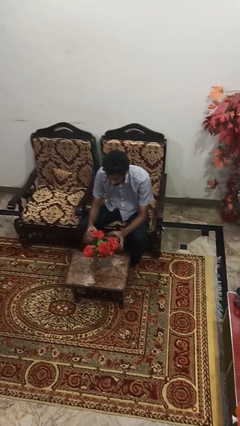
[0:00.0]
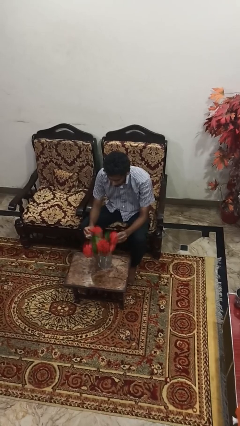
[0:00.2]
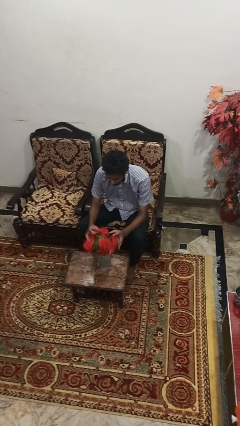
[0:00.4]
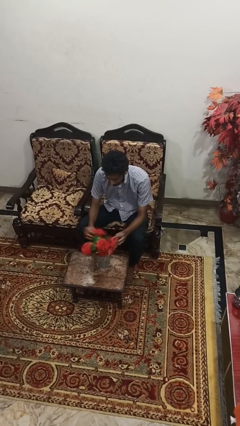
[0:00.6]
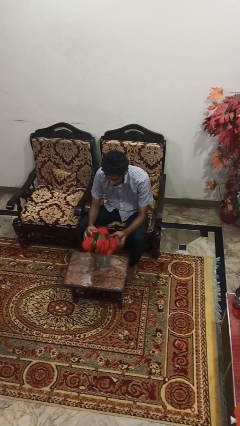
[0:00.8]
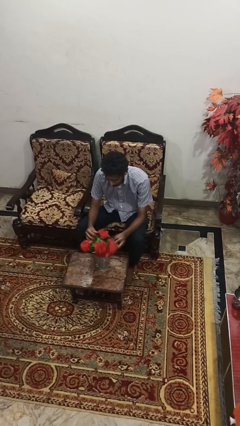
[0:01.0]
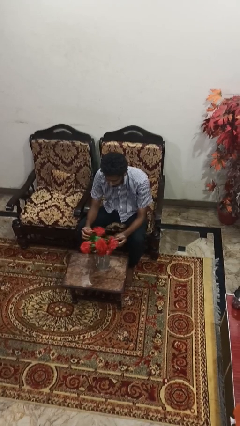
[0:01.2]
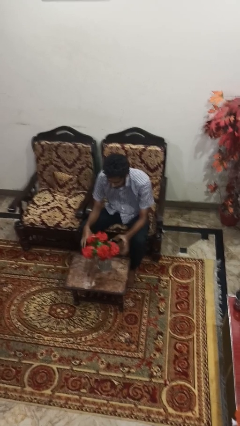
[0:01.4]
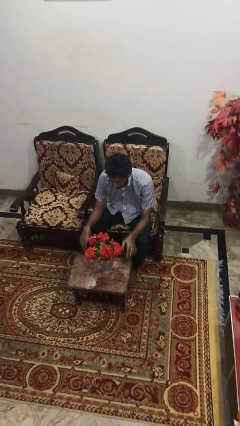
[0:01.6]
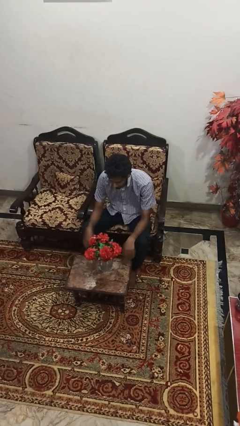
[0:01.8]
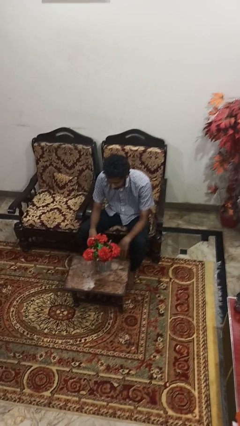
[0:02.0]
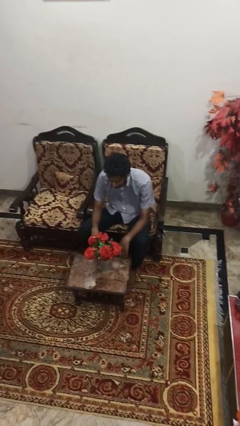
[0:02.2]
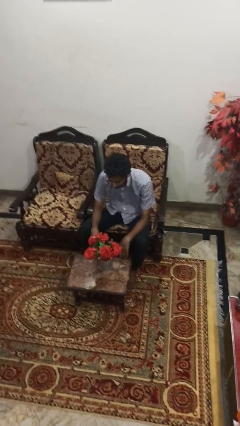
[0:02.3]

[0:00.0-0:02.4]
person arranges flowers in vase

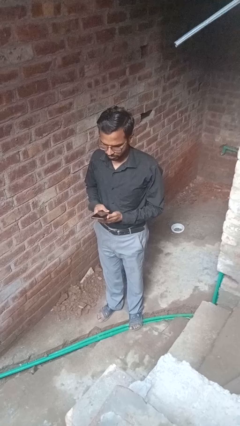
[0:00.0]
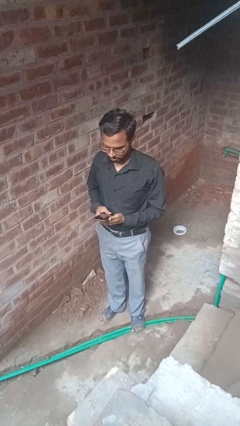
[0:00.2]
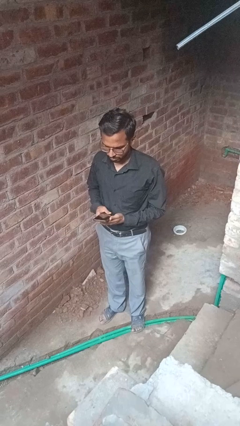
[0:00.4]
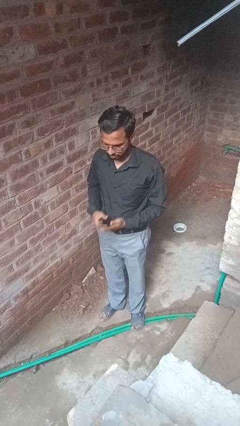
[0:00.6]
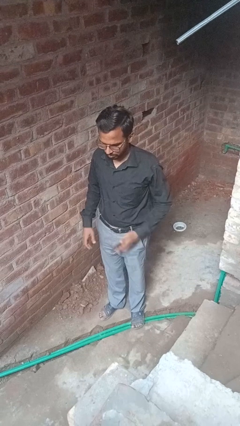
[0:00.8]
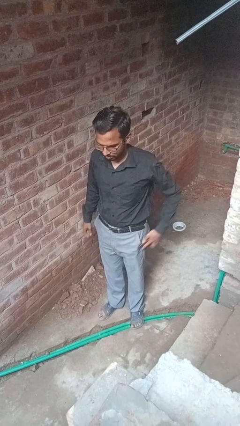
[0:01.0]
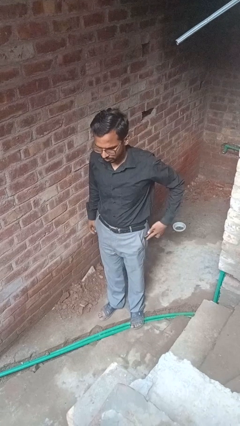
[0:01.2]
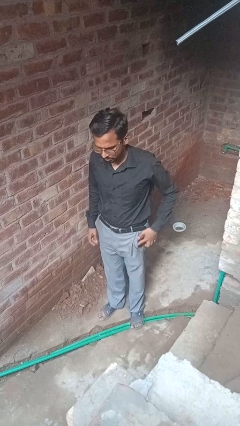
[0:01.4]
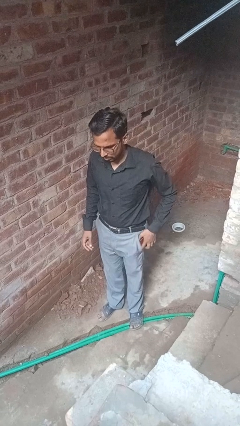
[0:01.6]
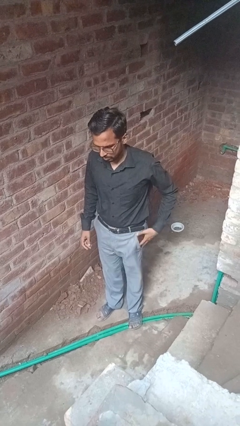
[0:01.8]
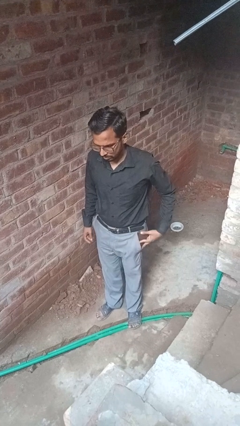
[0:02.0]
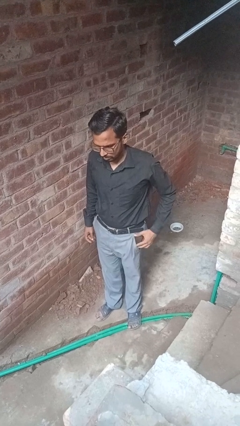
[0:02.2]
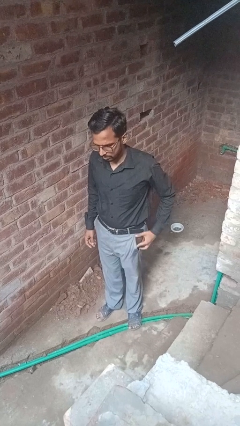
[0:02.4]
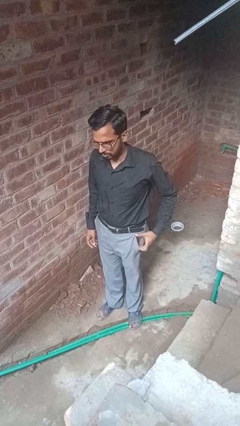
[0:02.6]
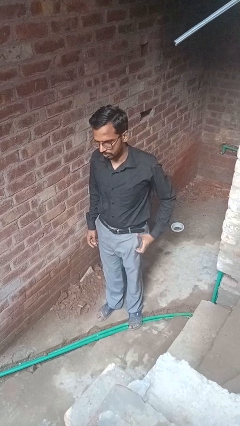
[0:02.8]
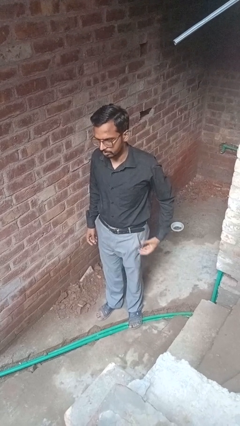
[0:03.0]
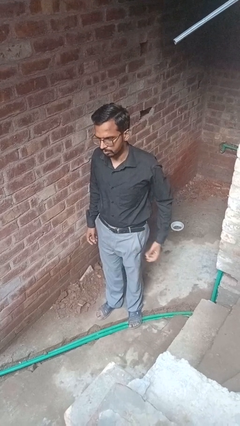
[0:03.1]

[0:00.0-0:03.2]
person puts phone into pocket

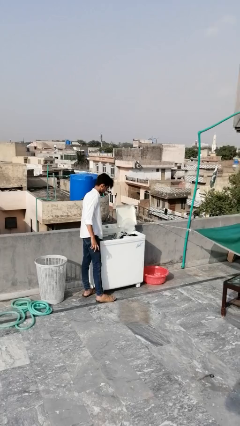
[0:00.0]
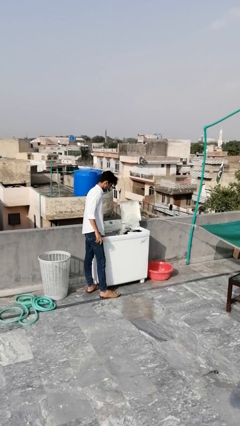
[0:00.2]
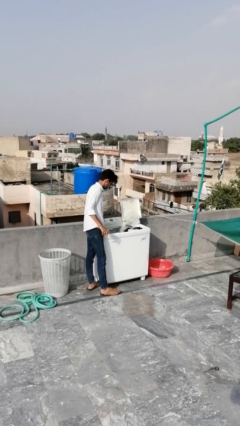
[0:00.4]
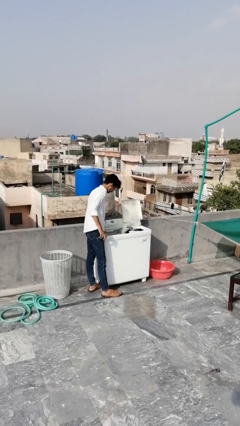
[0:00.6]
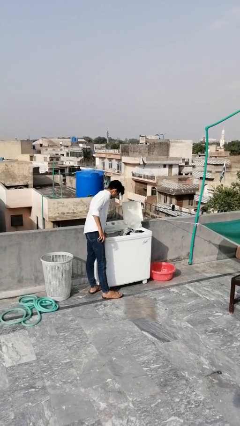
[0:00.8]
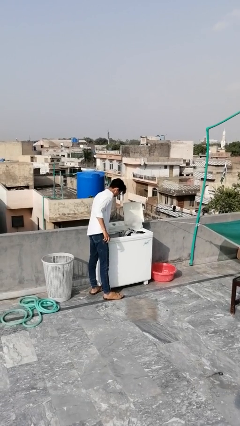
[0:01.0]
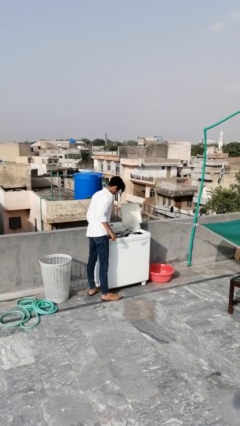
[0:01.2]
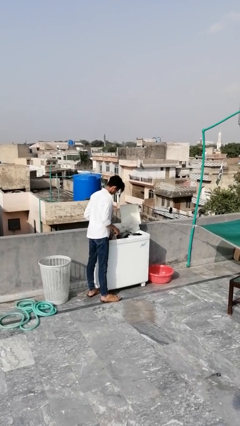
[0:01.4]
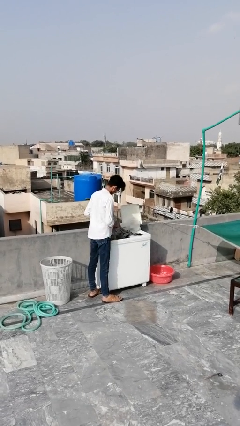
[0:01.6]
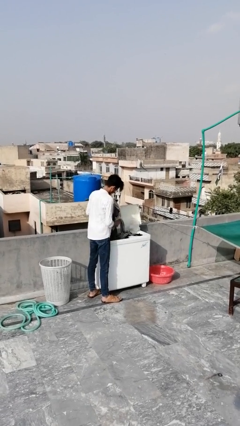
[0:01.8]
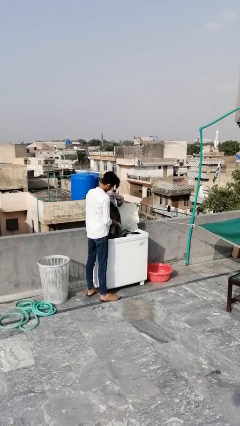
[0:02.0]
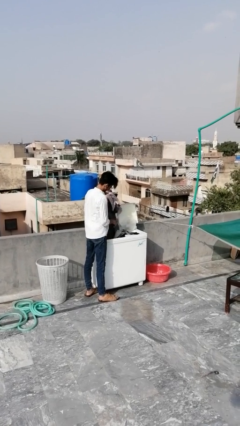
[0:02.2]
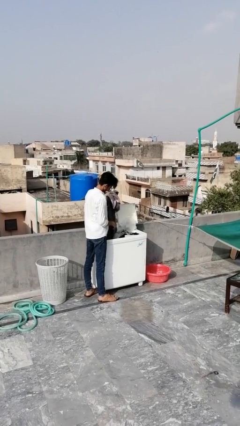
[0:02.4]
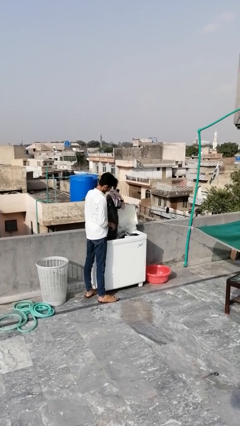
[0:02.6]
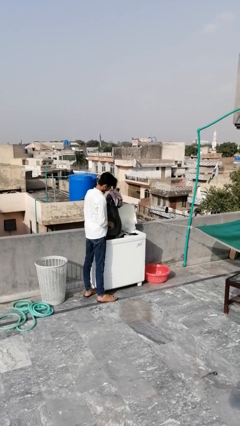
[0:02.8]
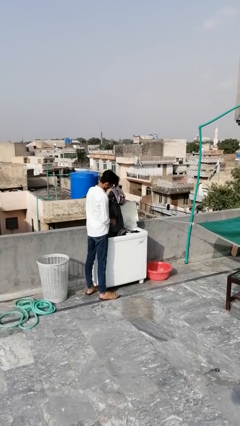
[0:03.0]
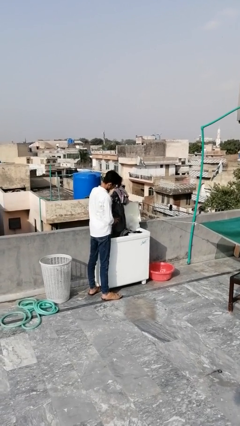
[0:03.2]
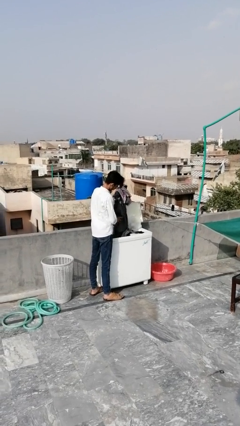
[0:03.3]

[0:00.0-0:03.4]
person unloads clotheswasher

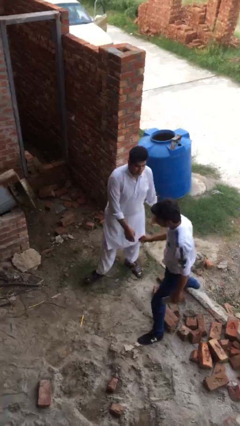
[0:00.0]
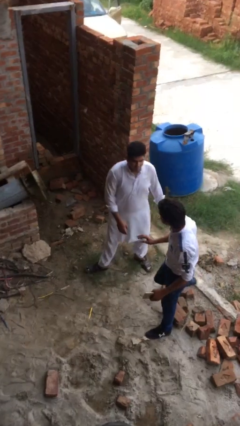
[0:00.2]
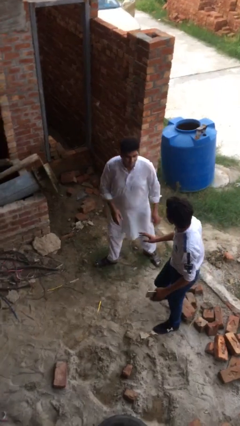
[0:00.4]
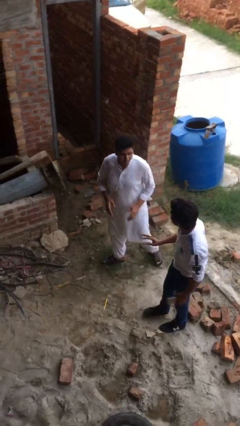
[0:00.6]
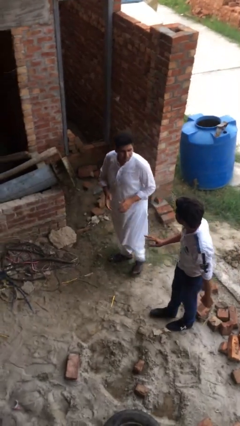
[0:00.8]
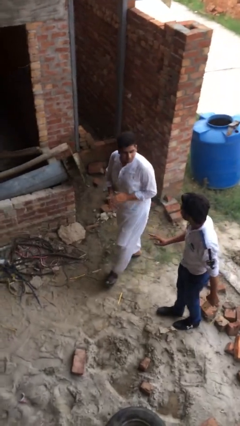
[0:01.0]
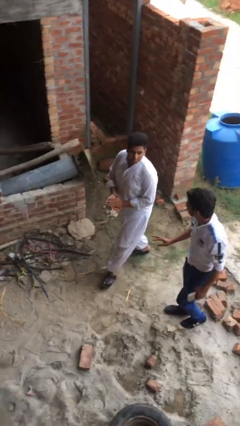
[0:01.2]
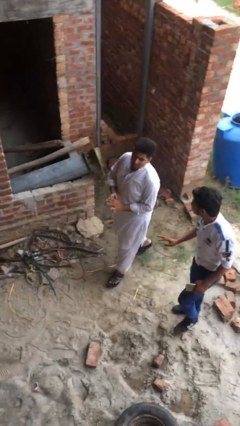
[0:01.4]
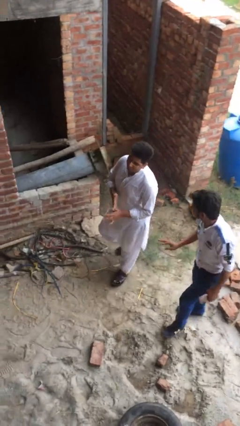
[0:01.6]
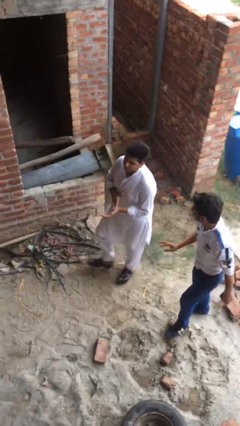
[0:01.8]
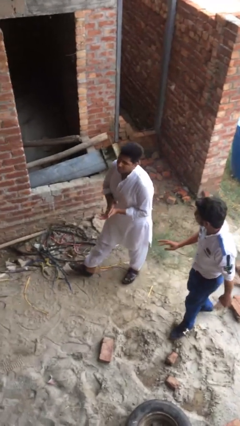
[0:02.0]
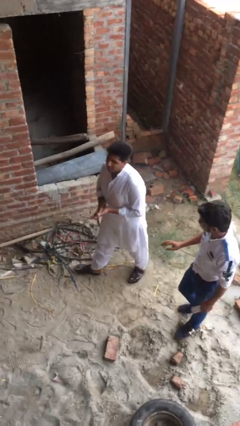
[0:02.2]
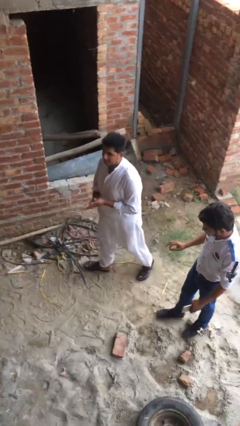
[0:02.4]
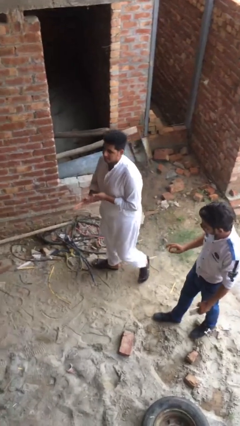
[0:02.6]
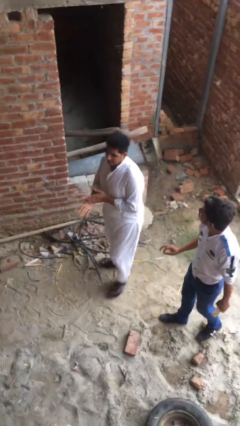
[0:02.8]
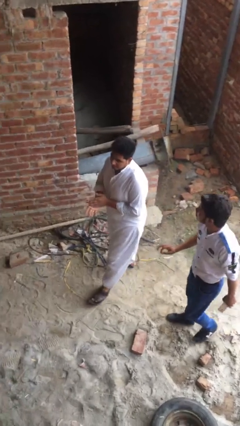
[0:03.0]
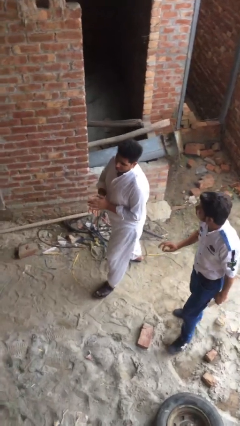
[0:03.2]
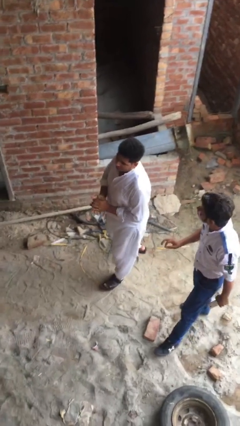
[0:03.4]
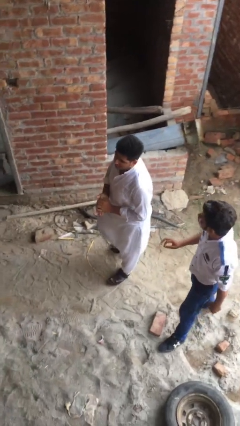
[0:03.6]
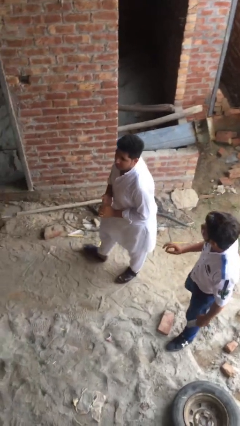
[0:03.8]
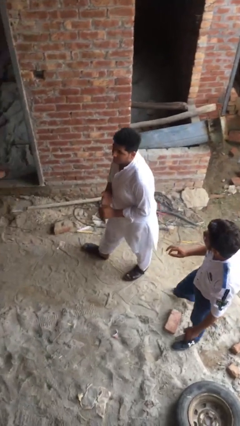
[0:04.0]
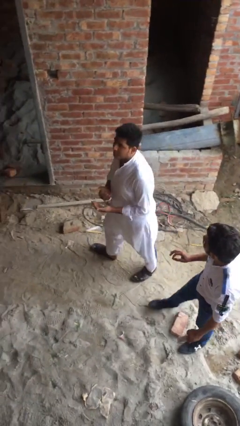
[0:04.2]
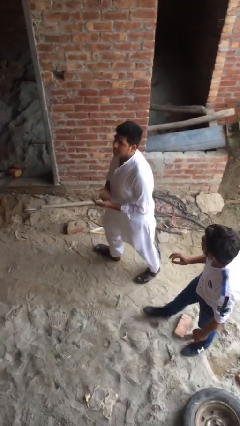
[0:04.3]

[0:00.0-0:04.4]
person talks to person

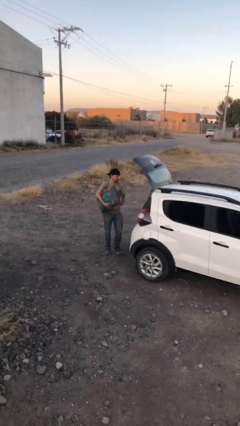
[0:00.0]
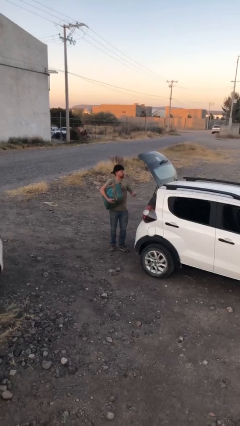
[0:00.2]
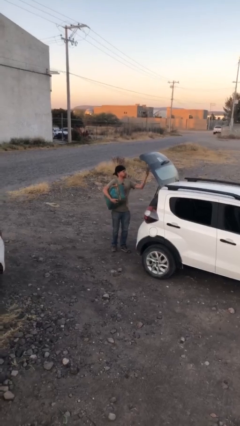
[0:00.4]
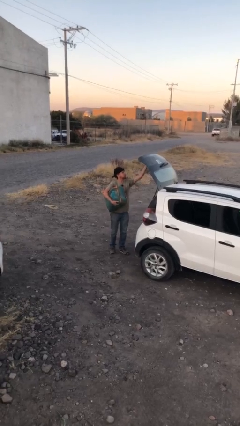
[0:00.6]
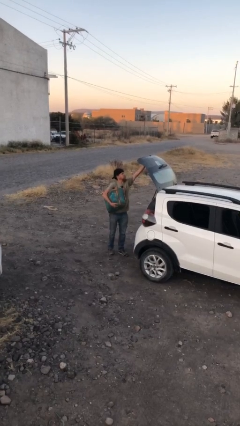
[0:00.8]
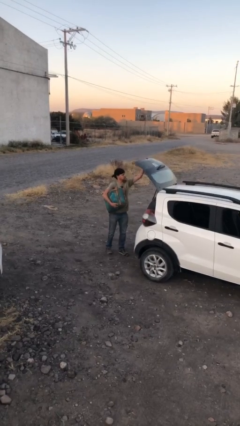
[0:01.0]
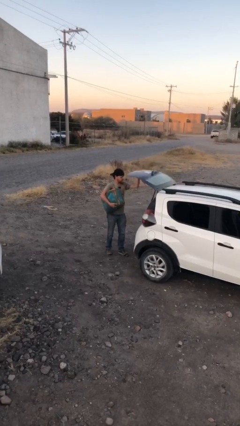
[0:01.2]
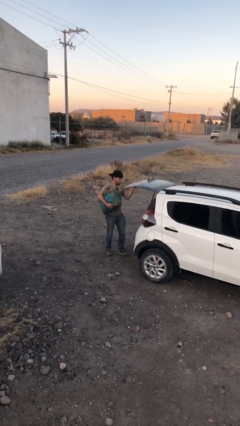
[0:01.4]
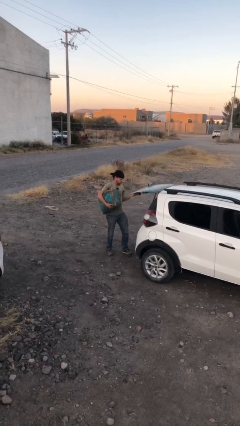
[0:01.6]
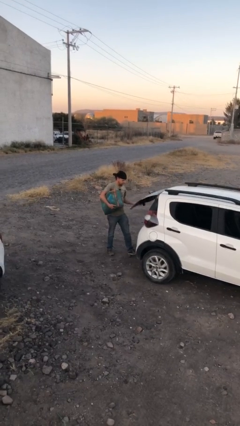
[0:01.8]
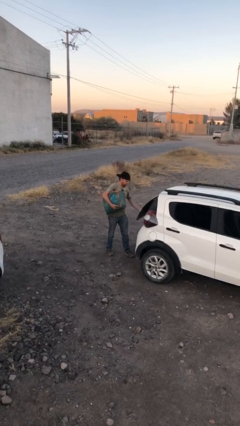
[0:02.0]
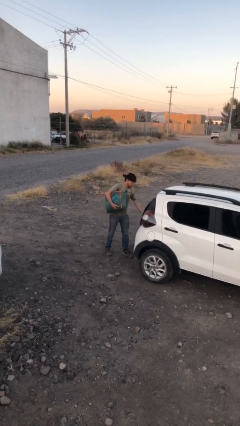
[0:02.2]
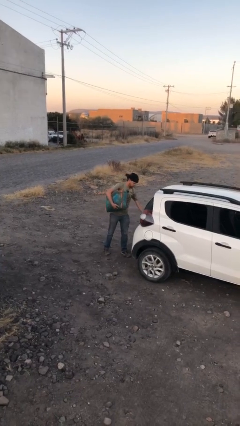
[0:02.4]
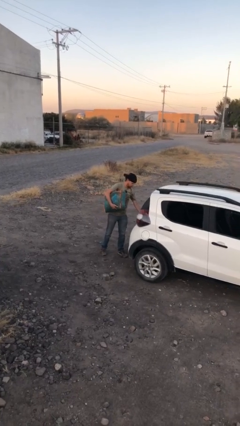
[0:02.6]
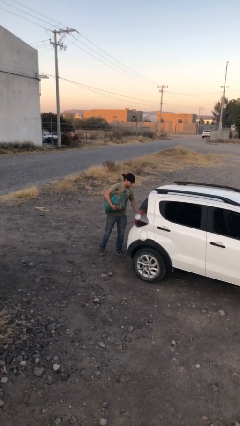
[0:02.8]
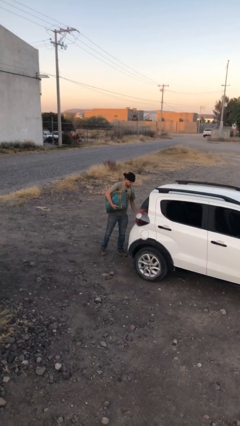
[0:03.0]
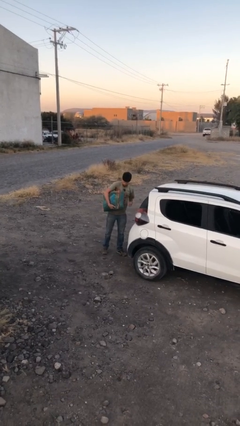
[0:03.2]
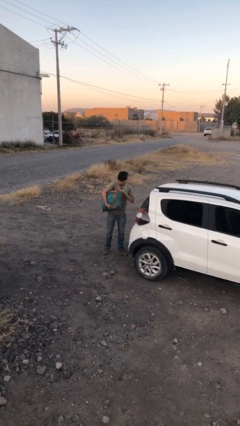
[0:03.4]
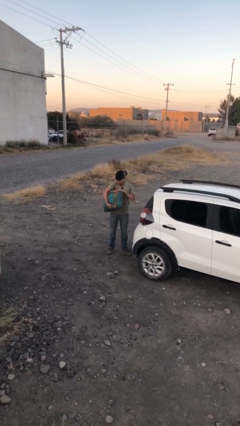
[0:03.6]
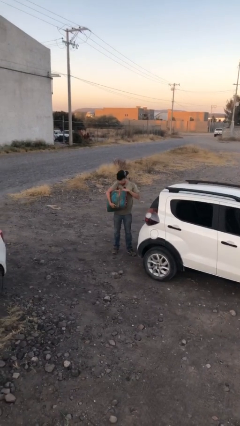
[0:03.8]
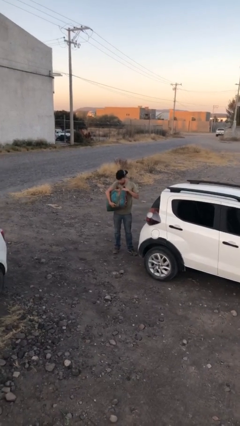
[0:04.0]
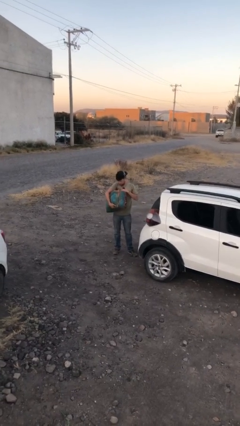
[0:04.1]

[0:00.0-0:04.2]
person closes car trunk
